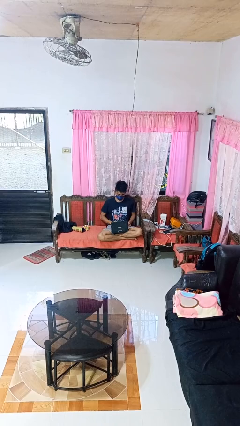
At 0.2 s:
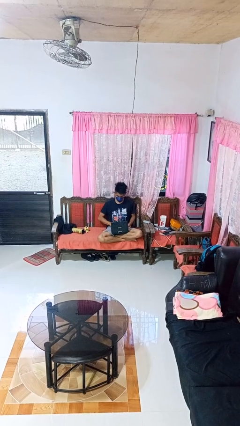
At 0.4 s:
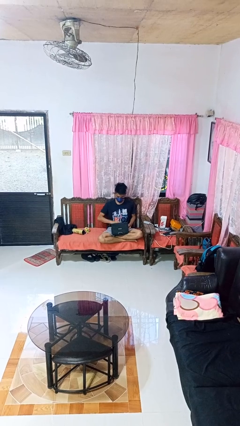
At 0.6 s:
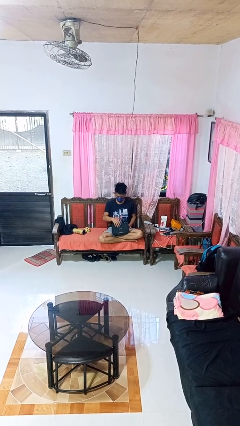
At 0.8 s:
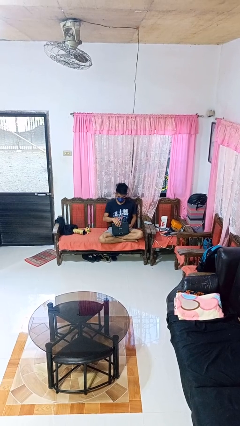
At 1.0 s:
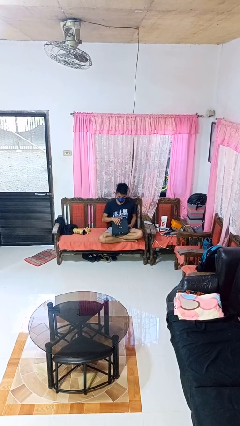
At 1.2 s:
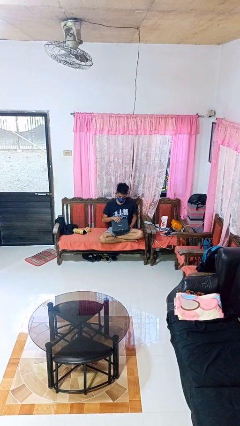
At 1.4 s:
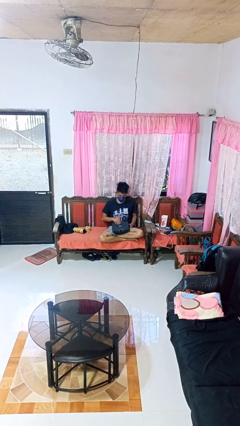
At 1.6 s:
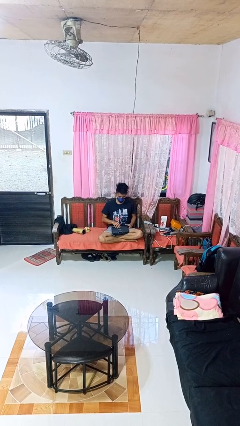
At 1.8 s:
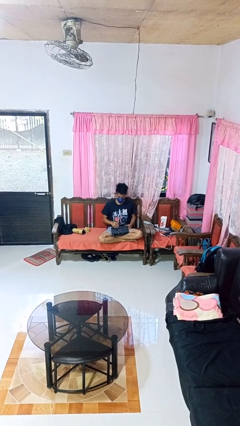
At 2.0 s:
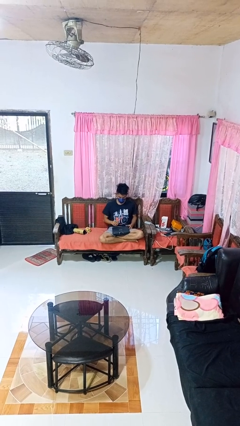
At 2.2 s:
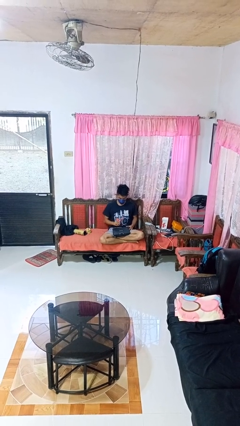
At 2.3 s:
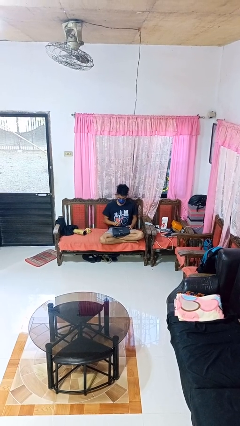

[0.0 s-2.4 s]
person closes laptop

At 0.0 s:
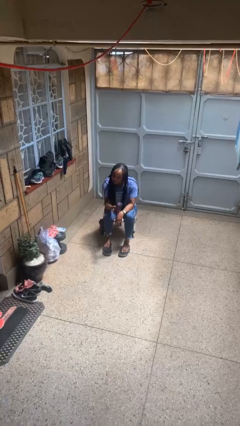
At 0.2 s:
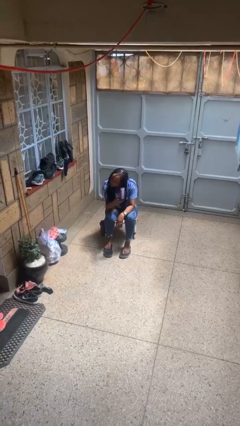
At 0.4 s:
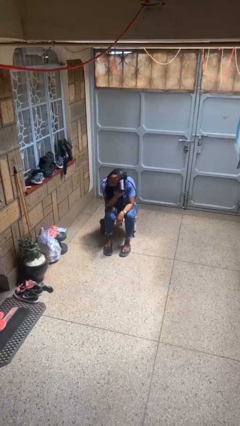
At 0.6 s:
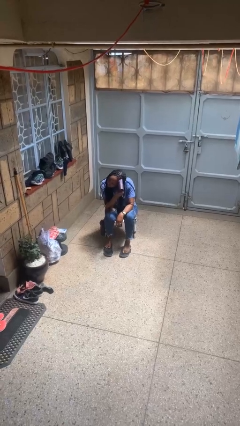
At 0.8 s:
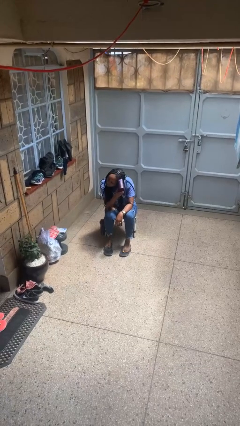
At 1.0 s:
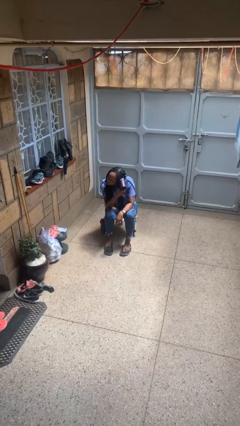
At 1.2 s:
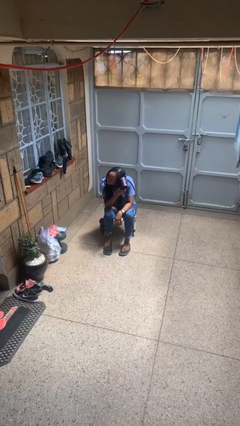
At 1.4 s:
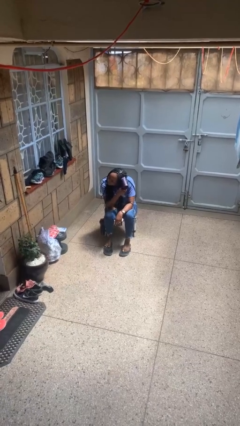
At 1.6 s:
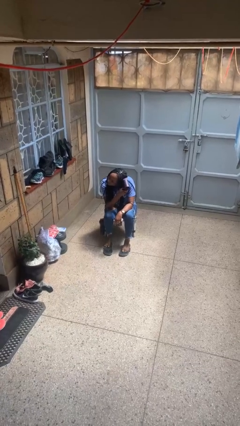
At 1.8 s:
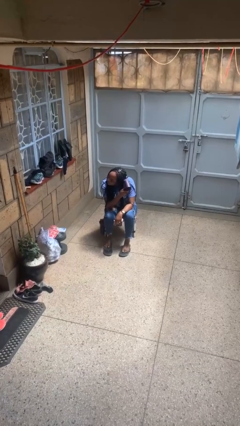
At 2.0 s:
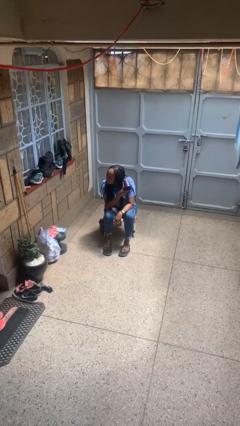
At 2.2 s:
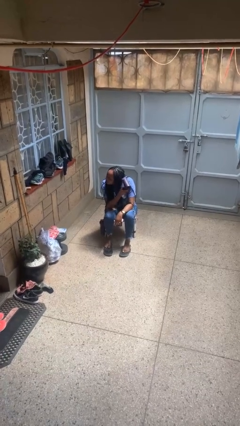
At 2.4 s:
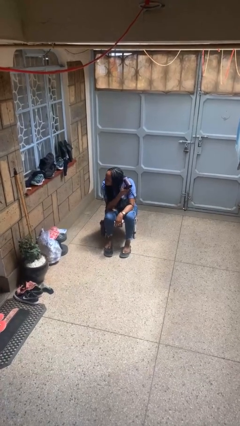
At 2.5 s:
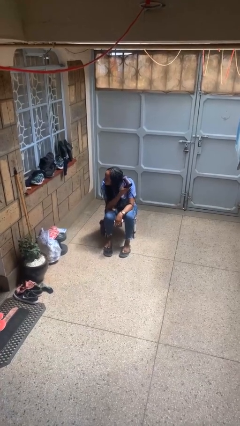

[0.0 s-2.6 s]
person dries hair with hairdryer

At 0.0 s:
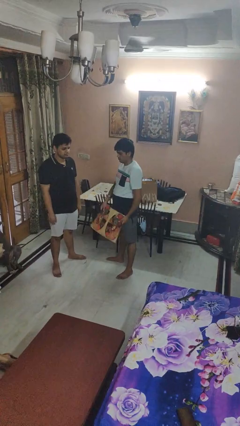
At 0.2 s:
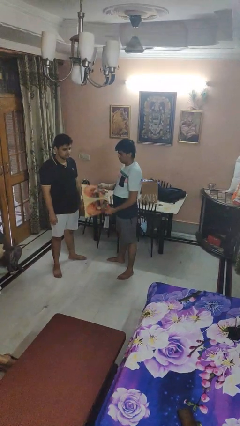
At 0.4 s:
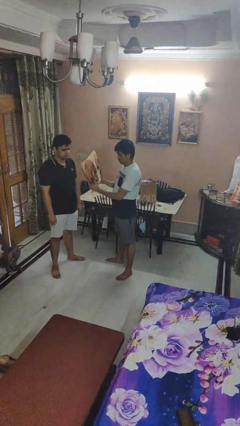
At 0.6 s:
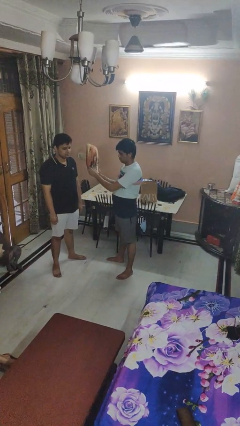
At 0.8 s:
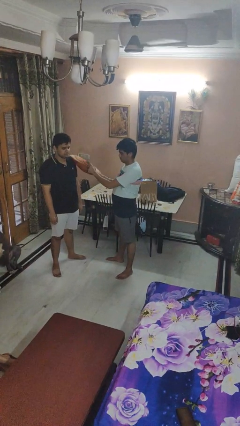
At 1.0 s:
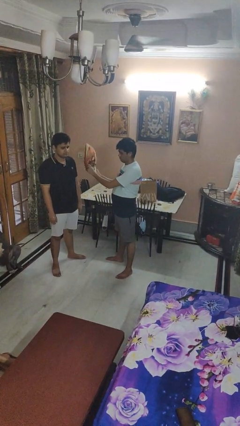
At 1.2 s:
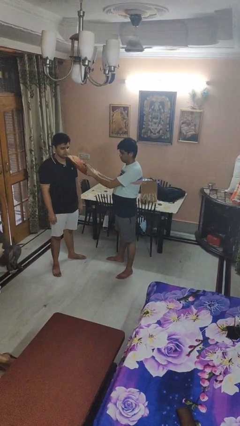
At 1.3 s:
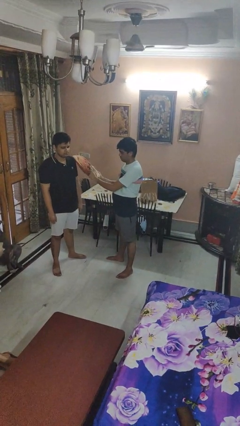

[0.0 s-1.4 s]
person hits person with pillow

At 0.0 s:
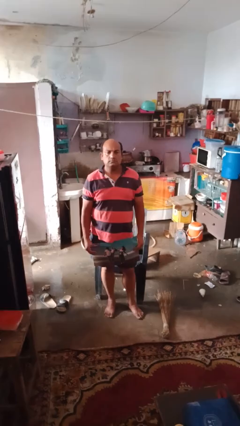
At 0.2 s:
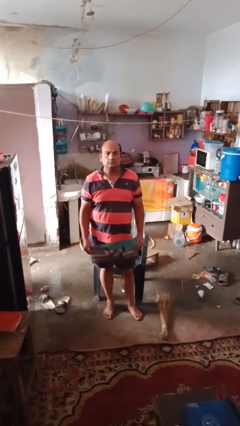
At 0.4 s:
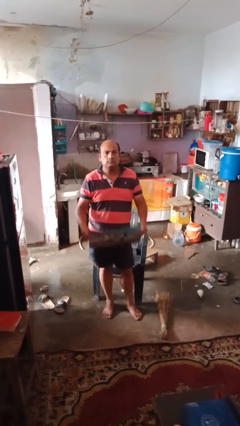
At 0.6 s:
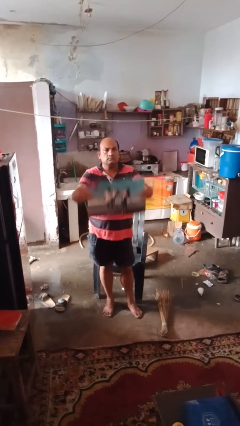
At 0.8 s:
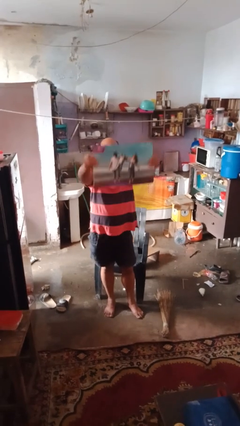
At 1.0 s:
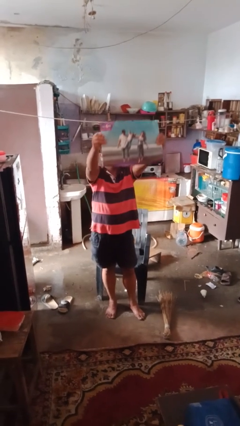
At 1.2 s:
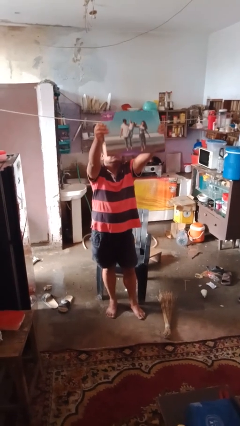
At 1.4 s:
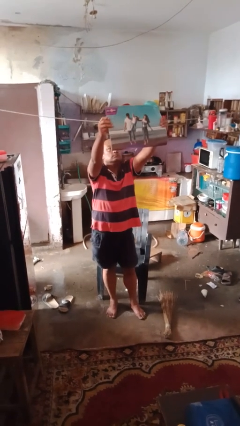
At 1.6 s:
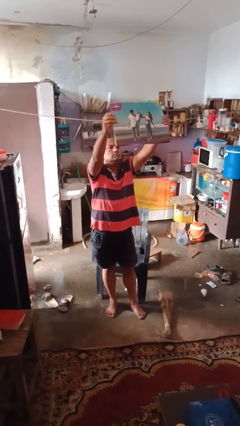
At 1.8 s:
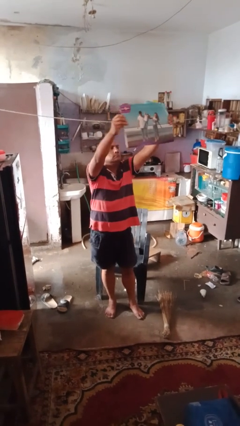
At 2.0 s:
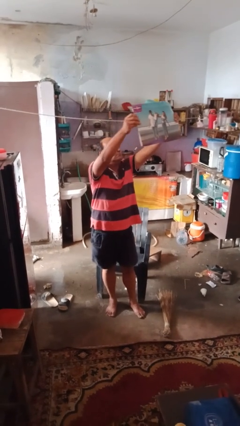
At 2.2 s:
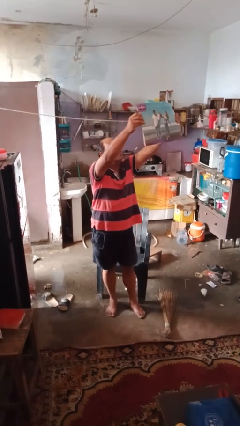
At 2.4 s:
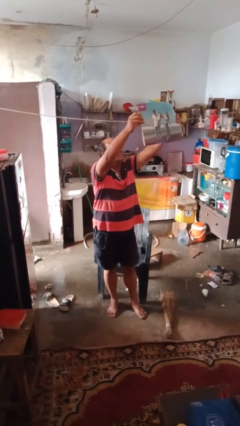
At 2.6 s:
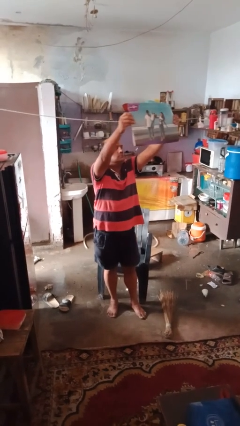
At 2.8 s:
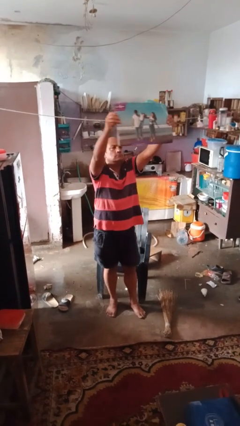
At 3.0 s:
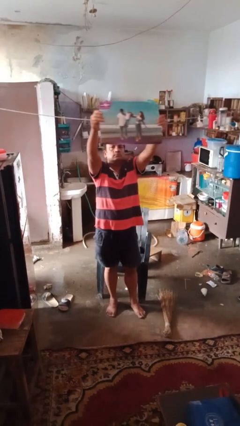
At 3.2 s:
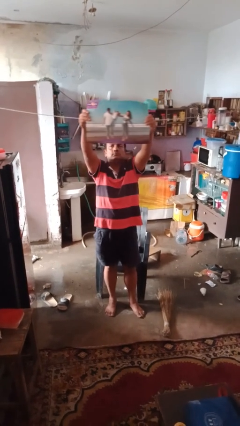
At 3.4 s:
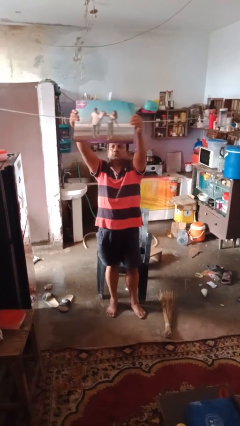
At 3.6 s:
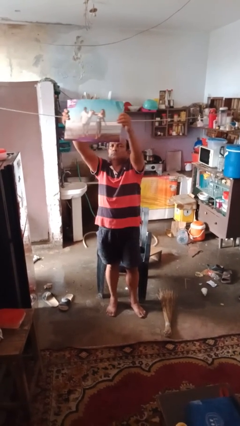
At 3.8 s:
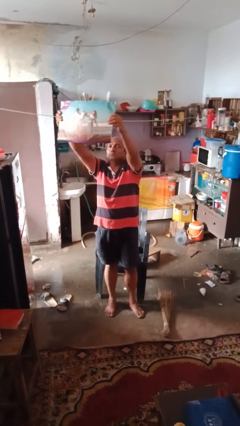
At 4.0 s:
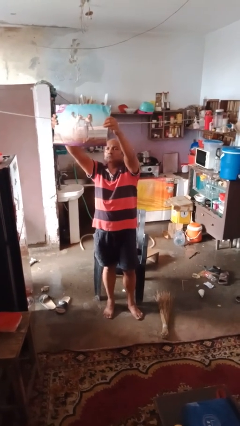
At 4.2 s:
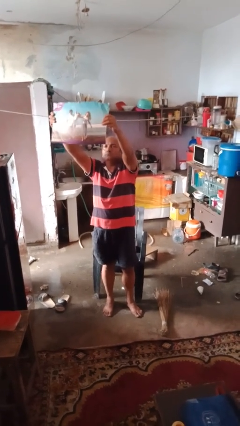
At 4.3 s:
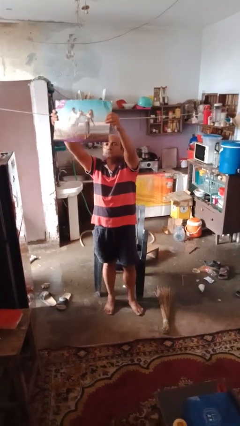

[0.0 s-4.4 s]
person holds object above head

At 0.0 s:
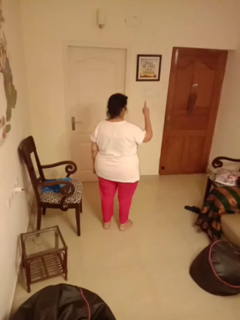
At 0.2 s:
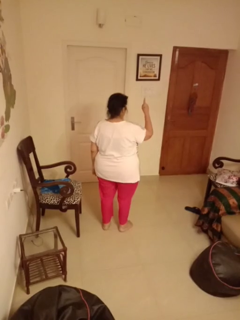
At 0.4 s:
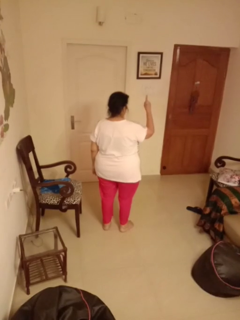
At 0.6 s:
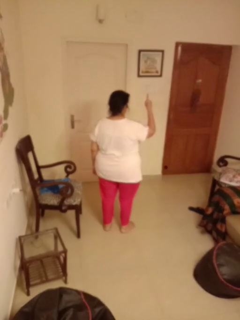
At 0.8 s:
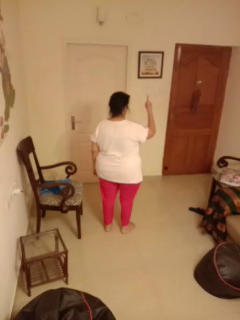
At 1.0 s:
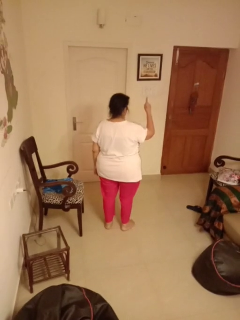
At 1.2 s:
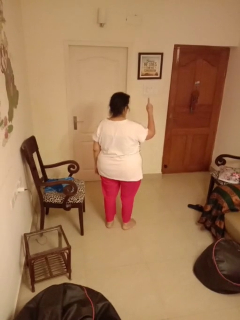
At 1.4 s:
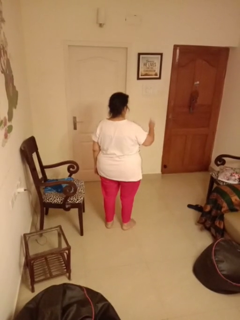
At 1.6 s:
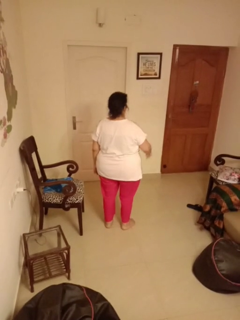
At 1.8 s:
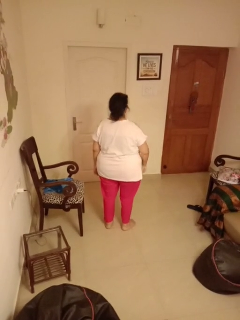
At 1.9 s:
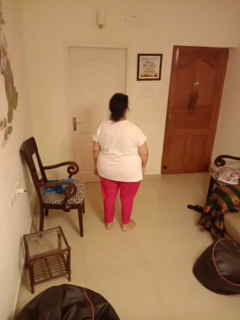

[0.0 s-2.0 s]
person gestures number one

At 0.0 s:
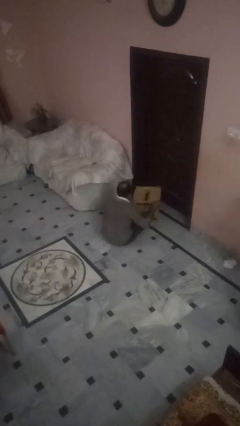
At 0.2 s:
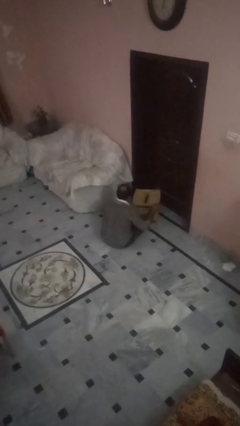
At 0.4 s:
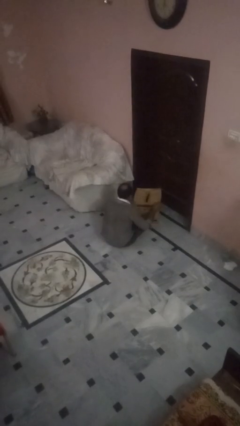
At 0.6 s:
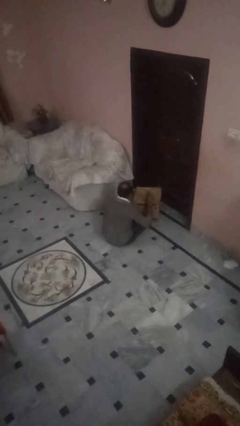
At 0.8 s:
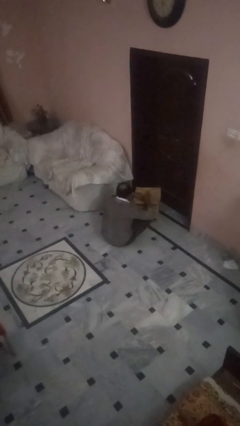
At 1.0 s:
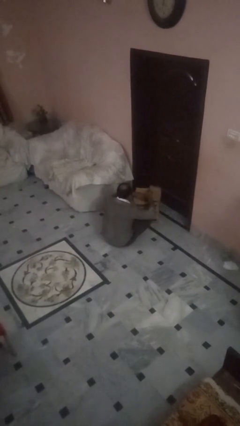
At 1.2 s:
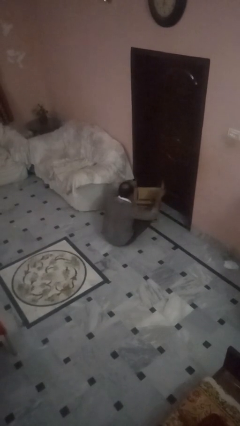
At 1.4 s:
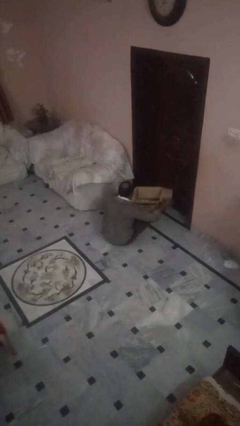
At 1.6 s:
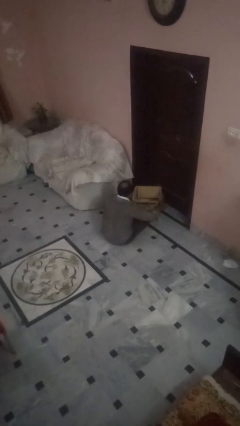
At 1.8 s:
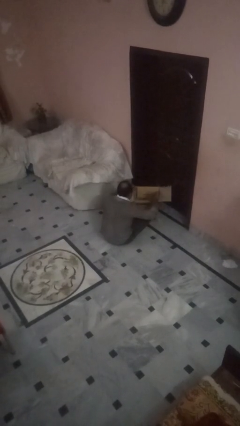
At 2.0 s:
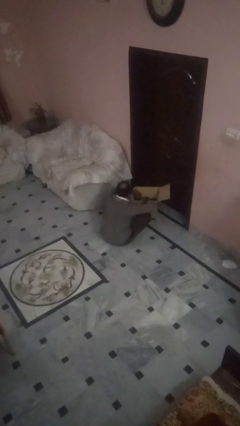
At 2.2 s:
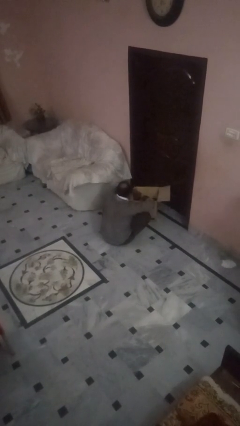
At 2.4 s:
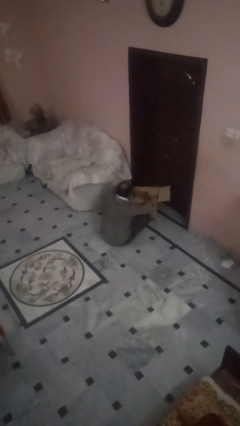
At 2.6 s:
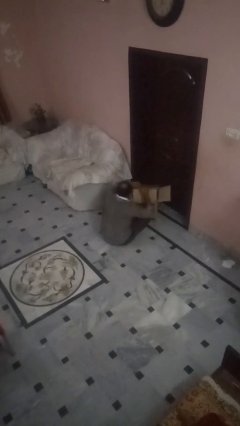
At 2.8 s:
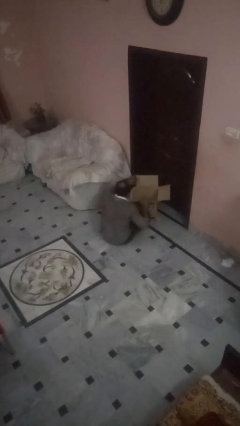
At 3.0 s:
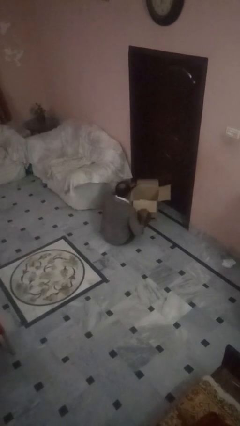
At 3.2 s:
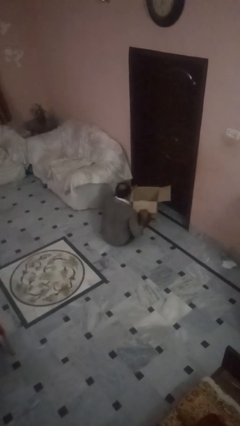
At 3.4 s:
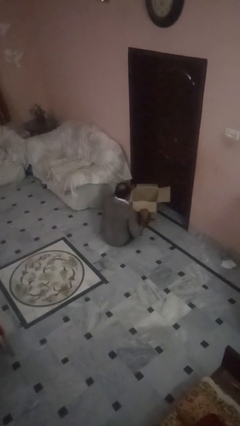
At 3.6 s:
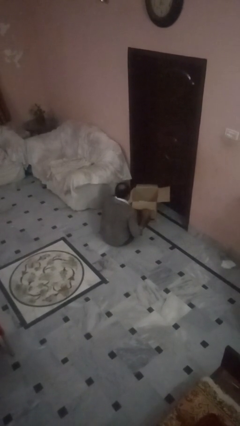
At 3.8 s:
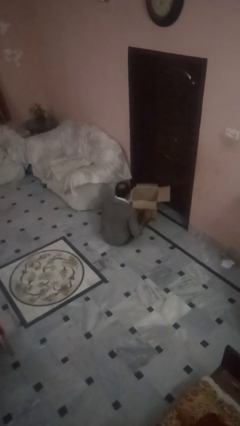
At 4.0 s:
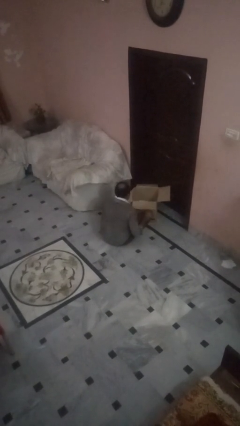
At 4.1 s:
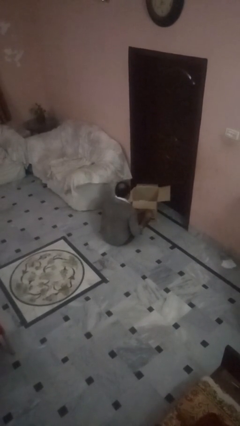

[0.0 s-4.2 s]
person opens box

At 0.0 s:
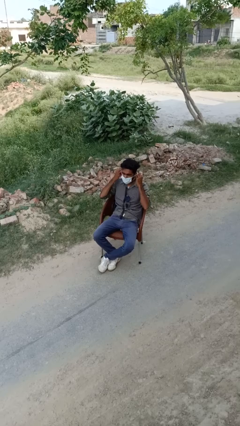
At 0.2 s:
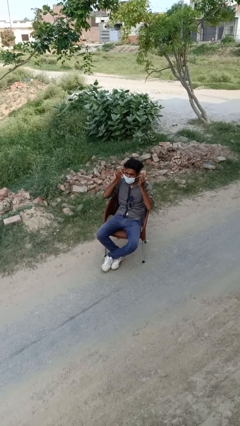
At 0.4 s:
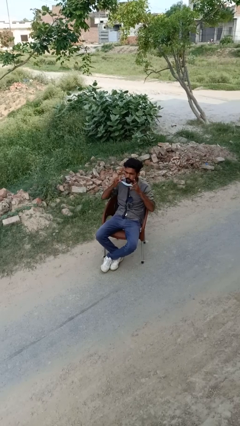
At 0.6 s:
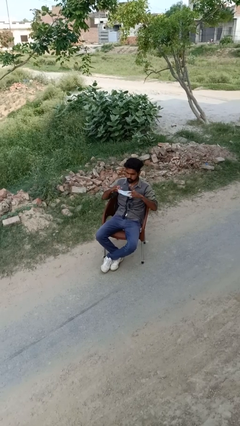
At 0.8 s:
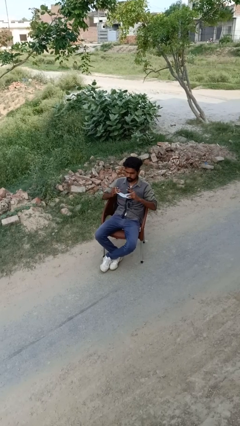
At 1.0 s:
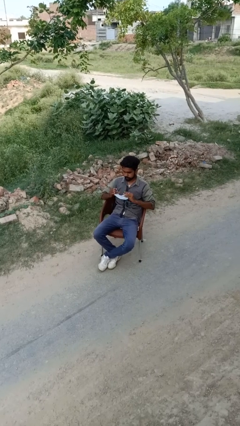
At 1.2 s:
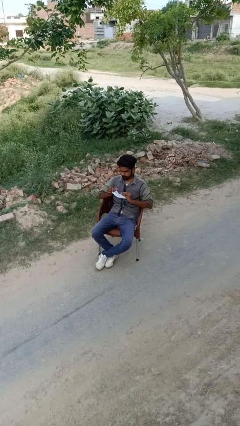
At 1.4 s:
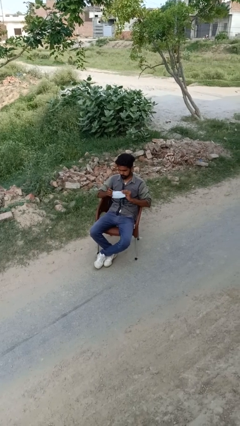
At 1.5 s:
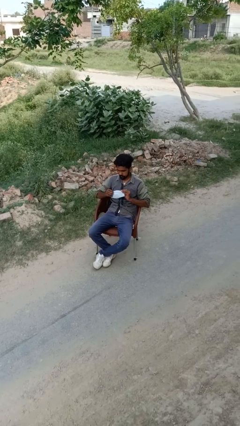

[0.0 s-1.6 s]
person takes off facemask
